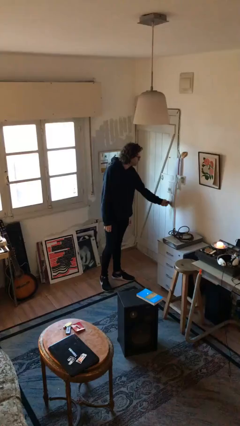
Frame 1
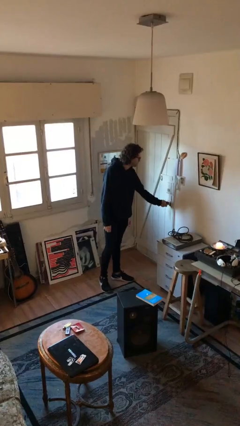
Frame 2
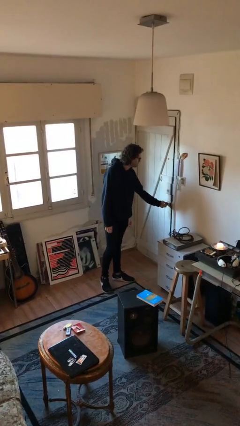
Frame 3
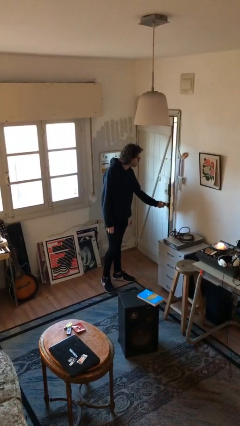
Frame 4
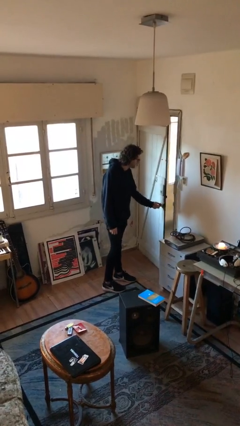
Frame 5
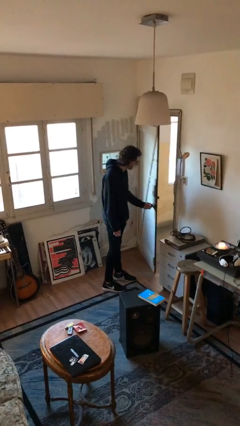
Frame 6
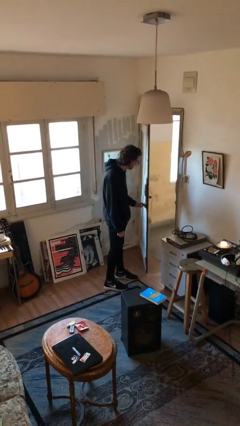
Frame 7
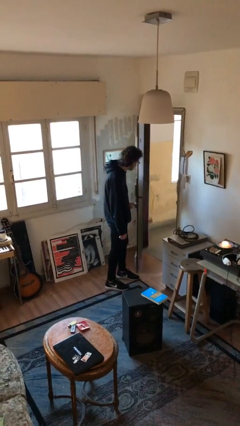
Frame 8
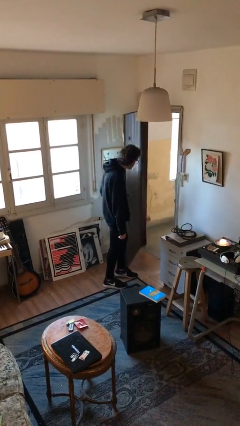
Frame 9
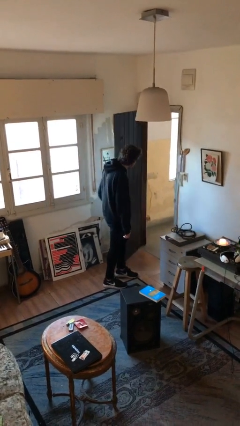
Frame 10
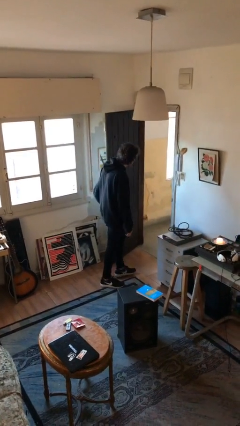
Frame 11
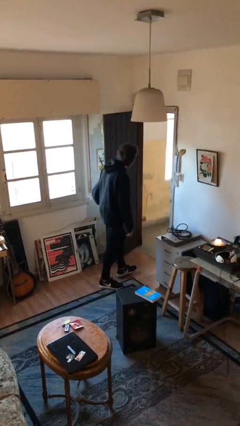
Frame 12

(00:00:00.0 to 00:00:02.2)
person opens facility door

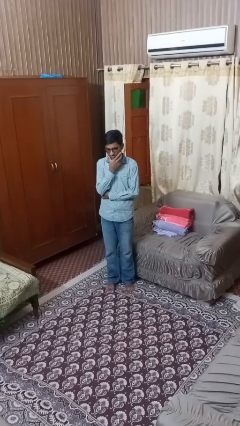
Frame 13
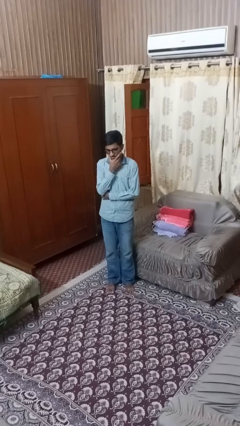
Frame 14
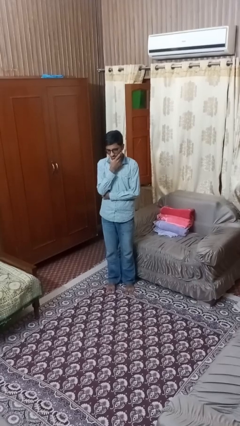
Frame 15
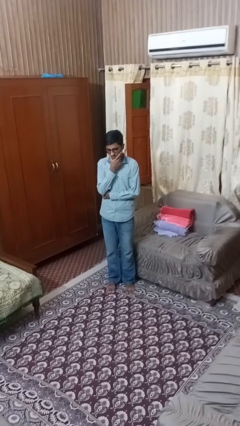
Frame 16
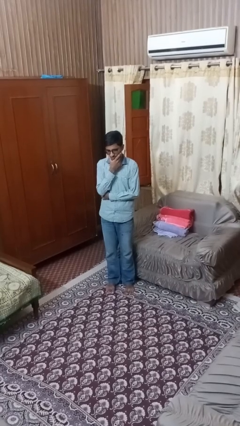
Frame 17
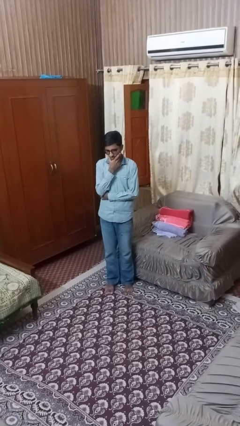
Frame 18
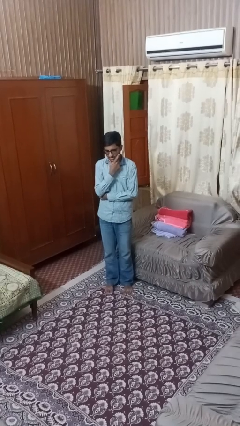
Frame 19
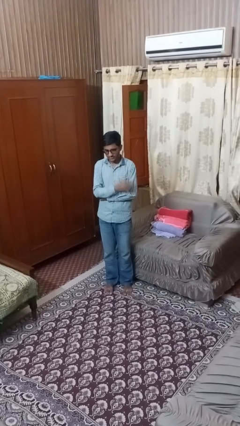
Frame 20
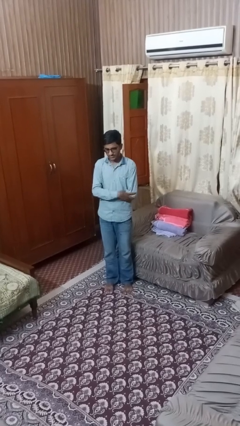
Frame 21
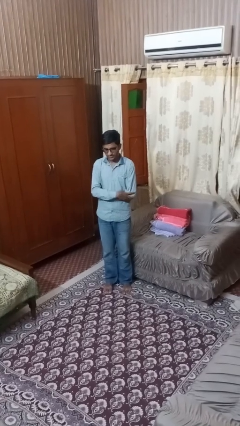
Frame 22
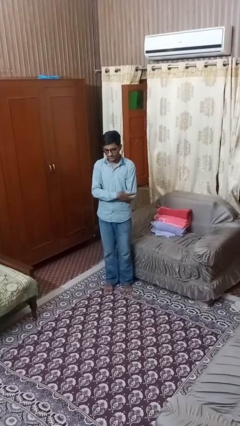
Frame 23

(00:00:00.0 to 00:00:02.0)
person strokes chin

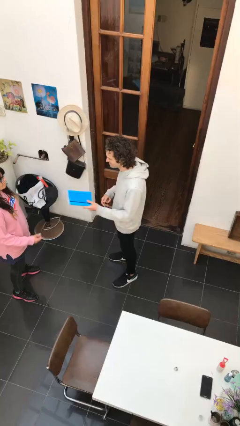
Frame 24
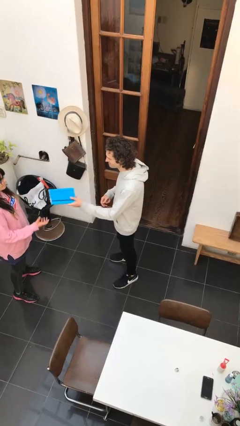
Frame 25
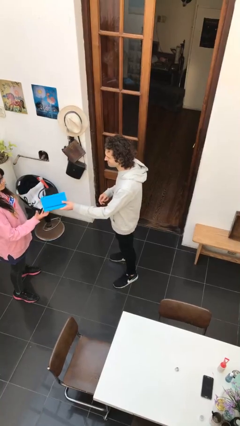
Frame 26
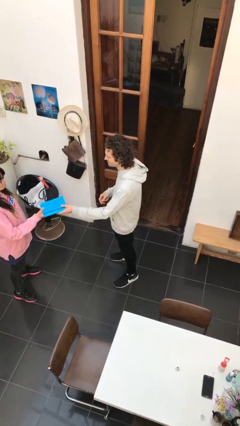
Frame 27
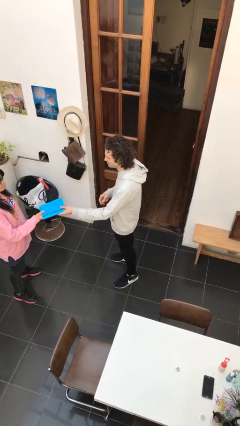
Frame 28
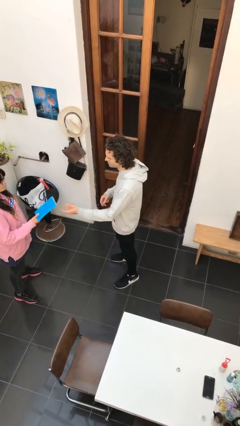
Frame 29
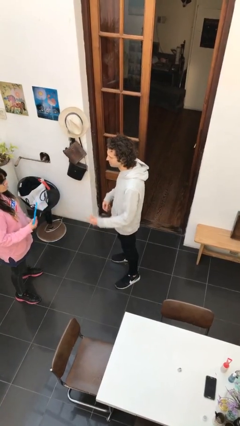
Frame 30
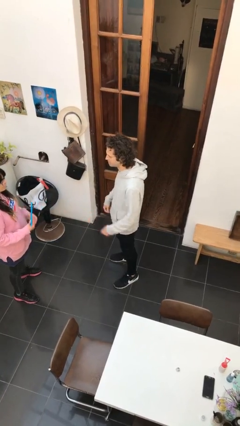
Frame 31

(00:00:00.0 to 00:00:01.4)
person transfers object to person

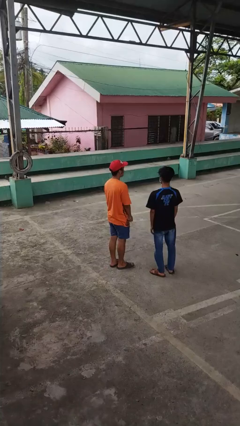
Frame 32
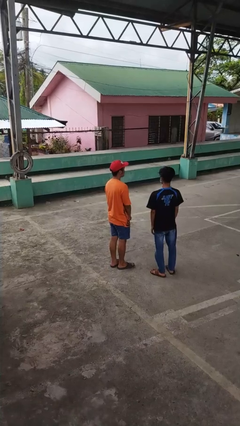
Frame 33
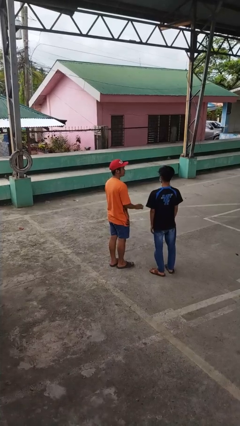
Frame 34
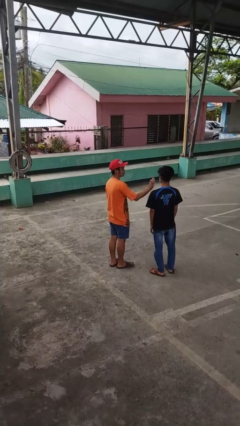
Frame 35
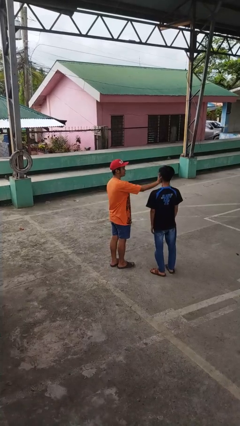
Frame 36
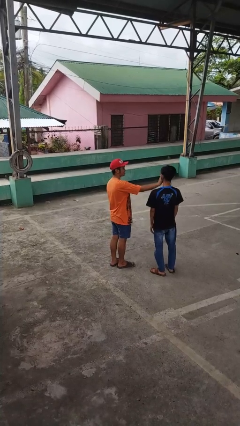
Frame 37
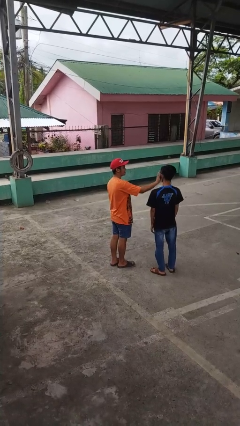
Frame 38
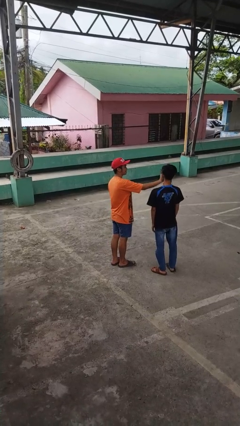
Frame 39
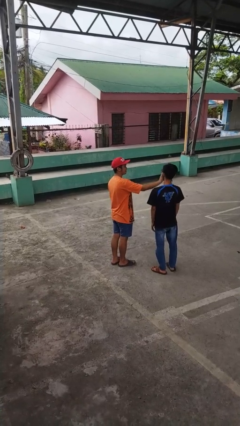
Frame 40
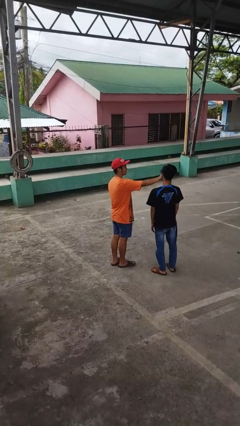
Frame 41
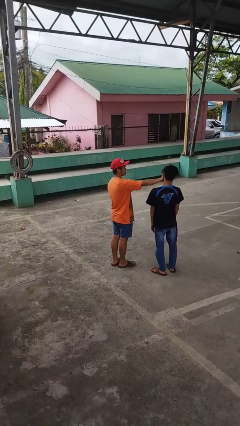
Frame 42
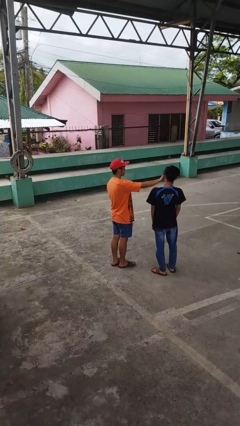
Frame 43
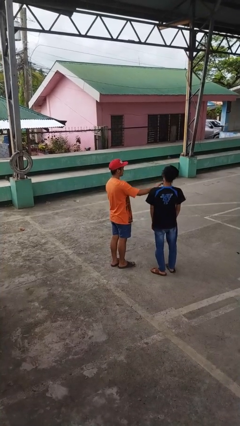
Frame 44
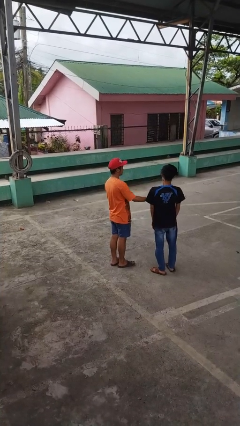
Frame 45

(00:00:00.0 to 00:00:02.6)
person touches face of person

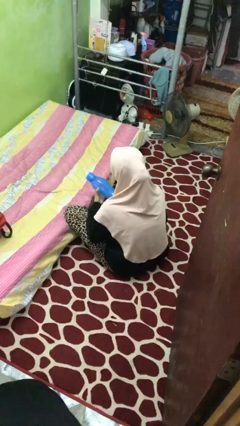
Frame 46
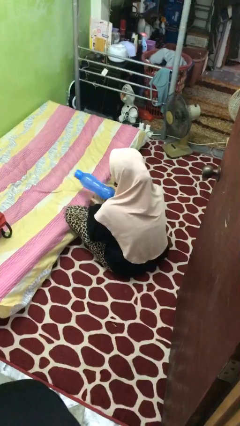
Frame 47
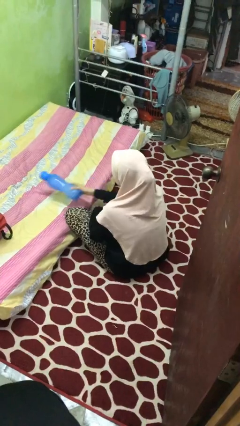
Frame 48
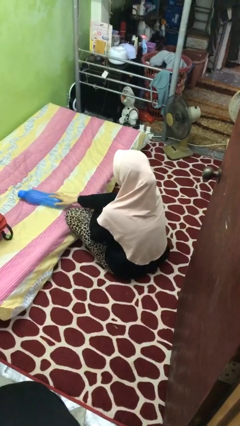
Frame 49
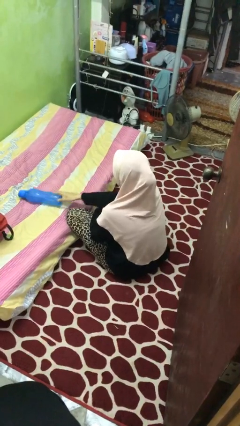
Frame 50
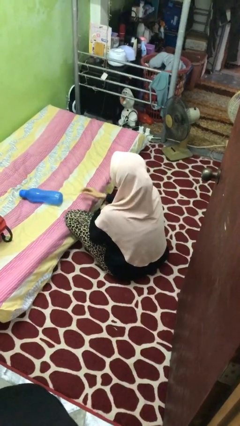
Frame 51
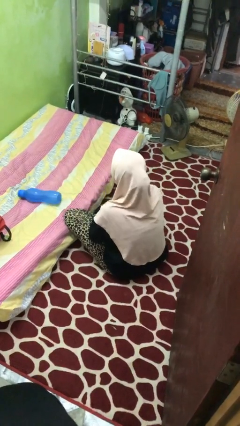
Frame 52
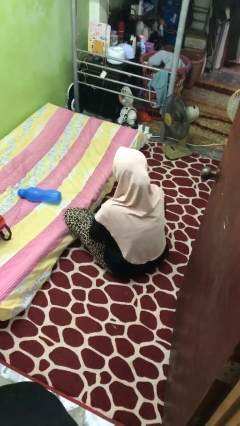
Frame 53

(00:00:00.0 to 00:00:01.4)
person puts down object on bed

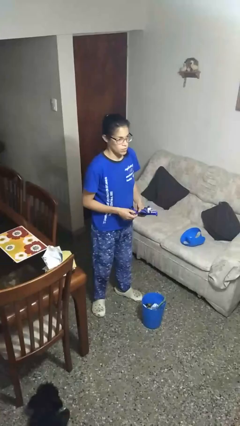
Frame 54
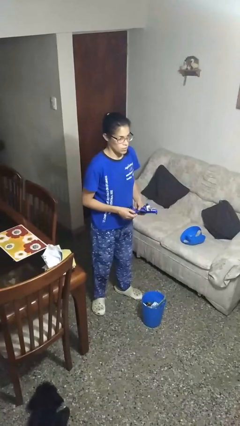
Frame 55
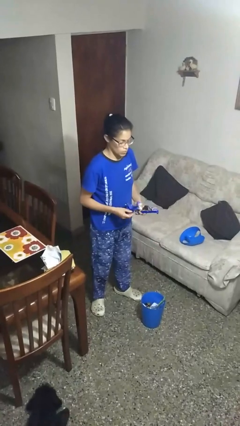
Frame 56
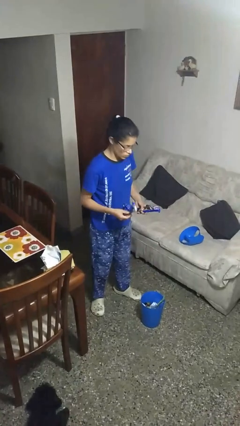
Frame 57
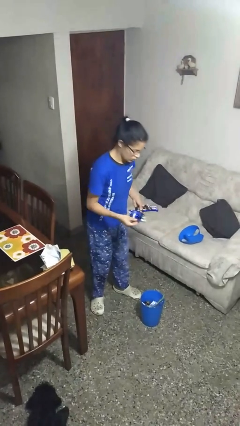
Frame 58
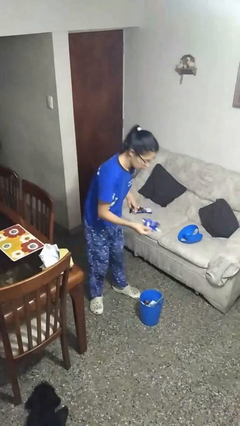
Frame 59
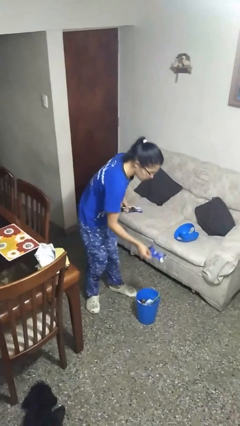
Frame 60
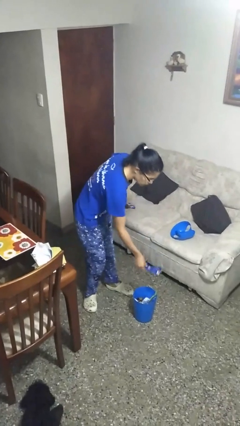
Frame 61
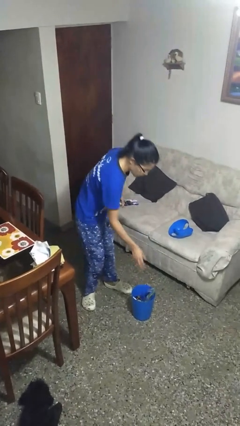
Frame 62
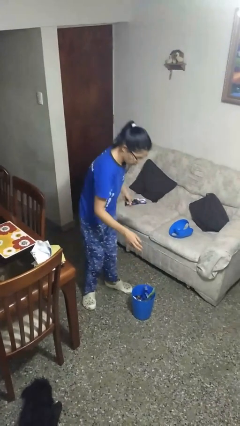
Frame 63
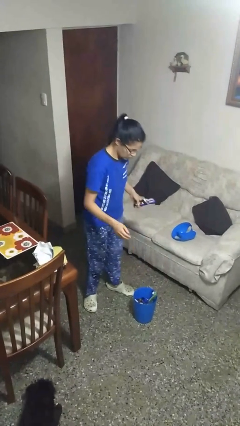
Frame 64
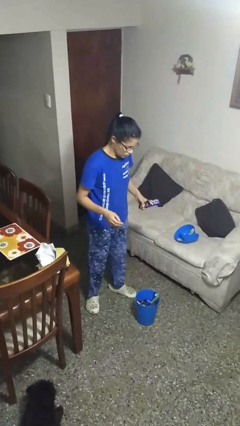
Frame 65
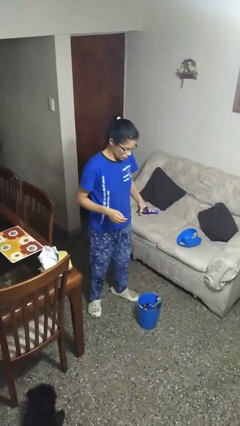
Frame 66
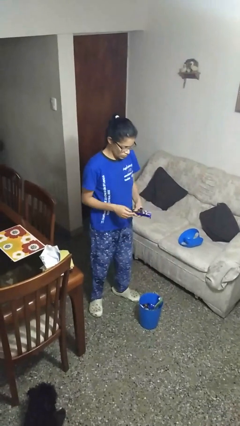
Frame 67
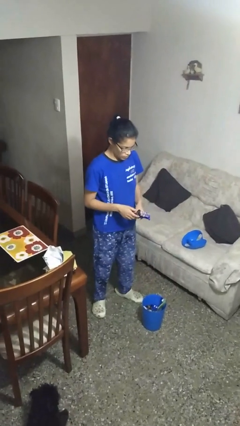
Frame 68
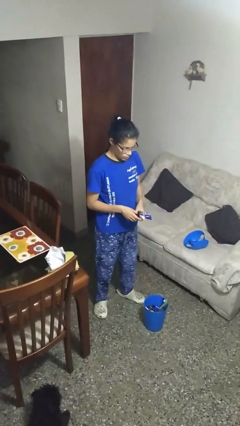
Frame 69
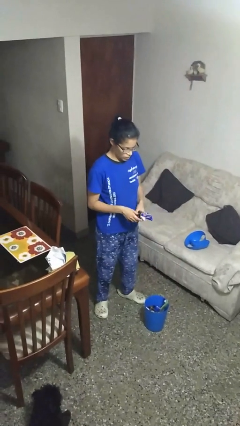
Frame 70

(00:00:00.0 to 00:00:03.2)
person discards trash

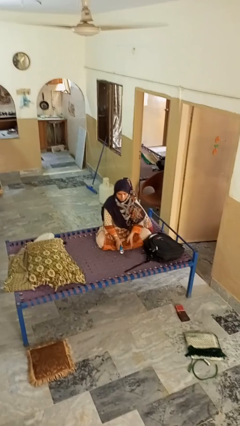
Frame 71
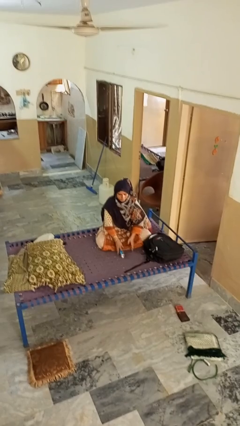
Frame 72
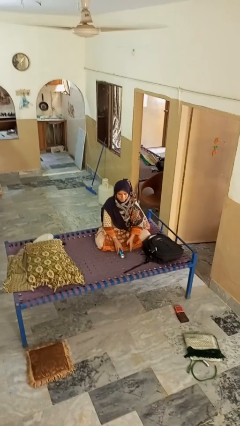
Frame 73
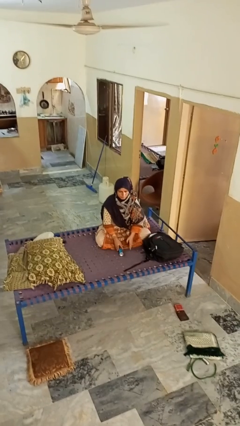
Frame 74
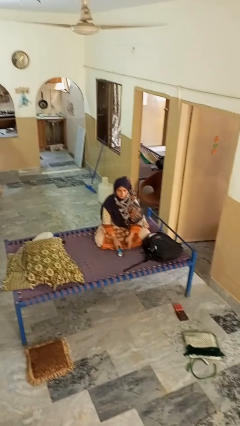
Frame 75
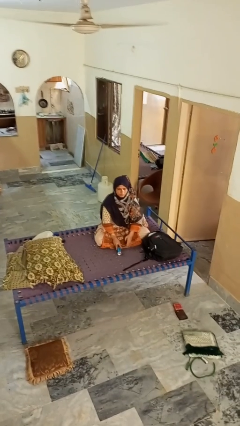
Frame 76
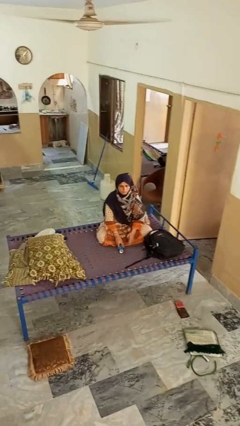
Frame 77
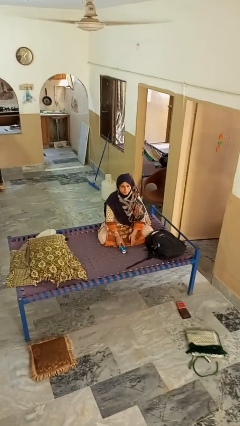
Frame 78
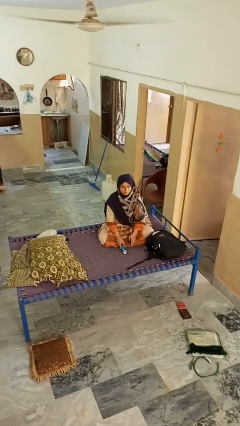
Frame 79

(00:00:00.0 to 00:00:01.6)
person catches dropped object

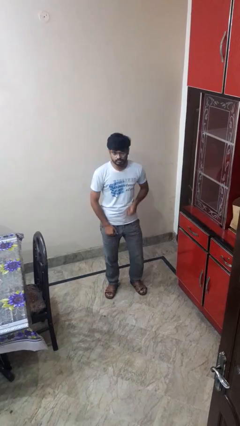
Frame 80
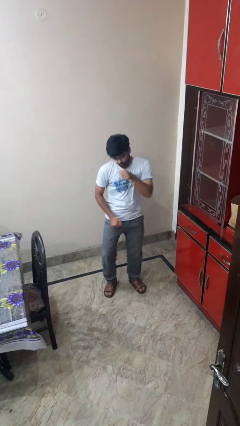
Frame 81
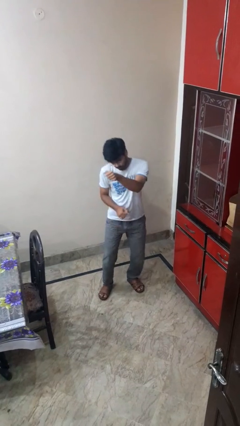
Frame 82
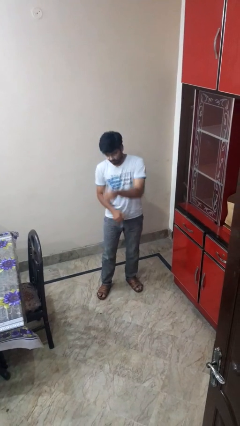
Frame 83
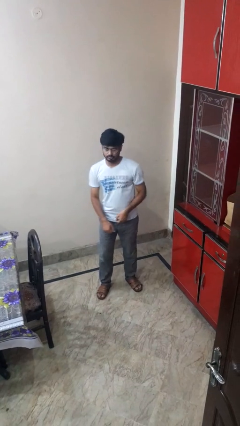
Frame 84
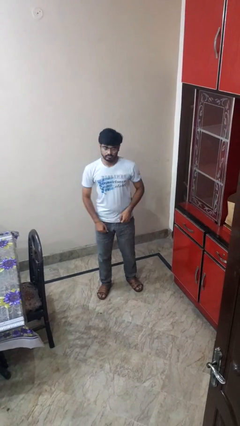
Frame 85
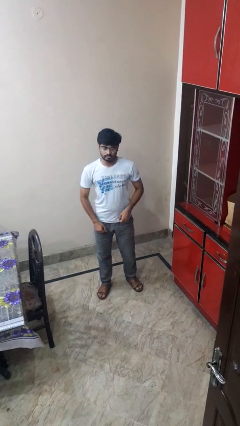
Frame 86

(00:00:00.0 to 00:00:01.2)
person punches

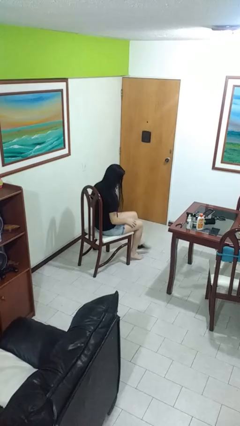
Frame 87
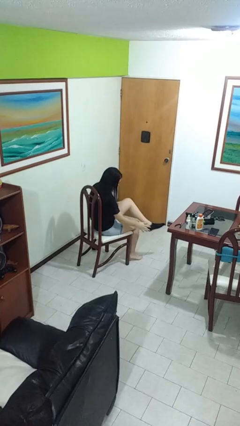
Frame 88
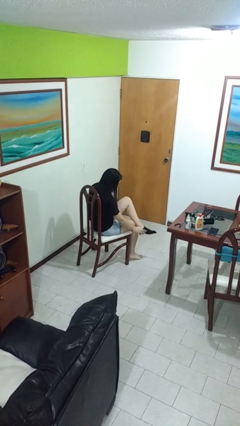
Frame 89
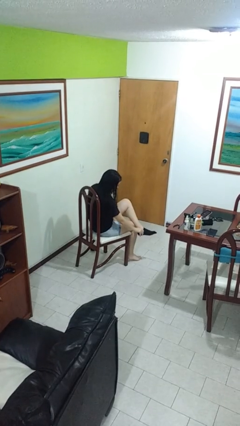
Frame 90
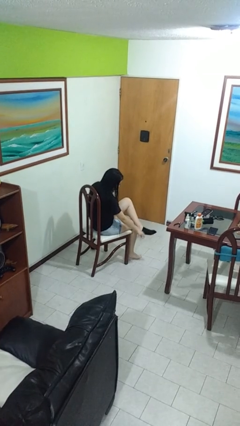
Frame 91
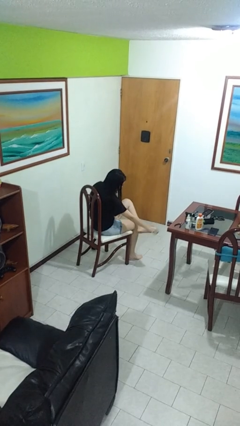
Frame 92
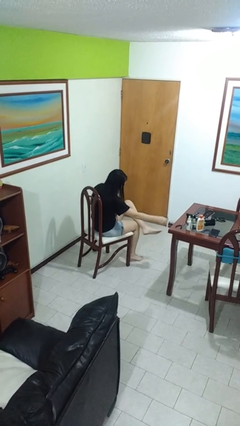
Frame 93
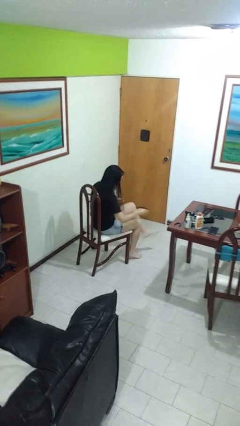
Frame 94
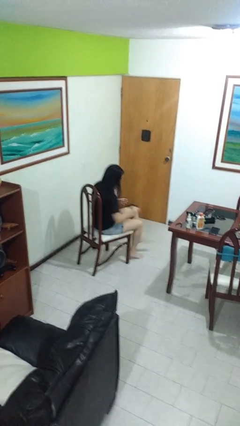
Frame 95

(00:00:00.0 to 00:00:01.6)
person takes off socks
